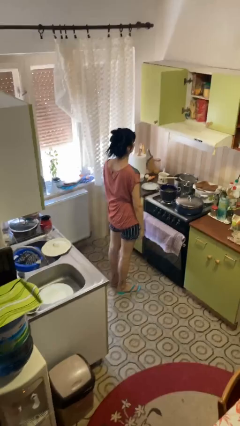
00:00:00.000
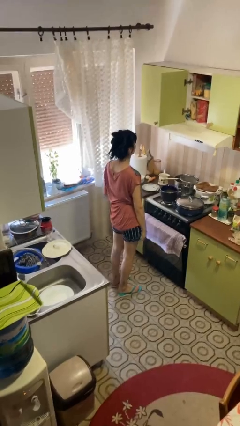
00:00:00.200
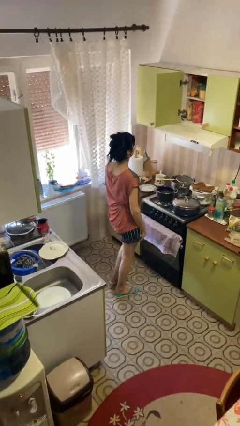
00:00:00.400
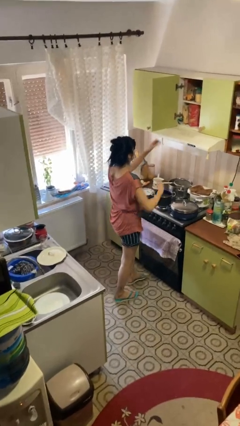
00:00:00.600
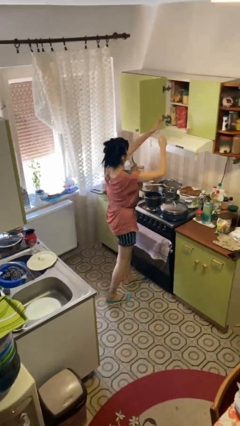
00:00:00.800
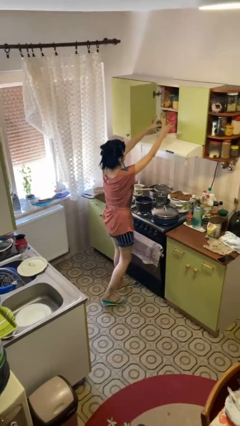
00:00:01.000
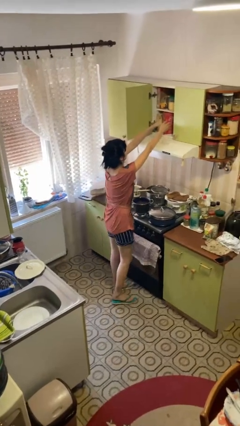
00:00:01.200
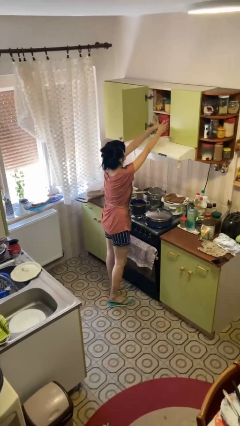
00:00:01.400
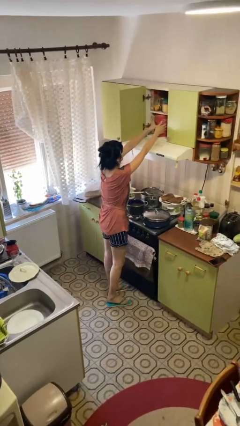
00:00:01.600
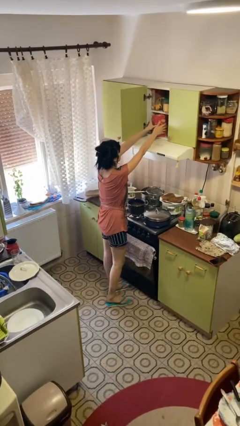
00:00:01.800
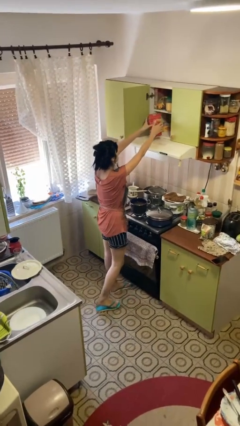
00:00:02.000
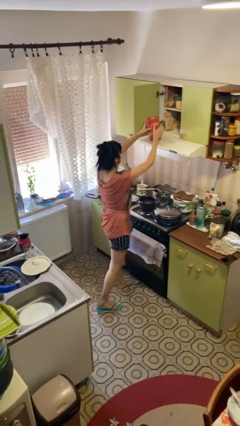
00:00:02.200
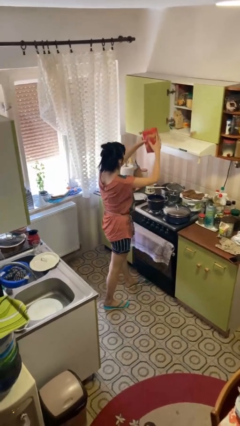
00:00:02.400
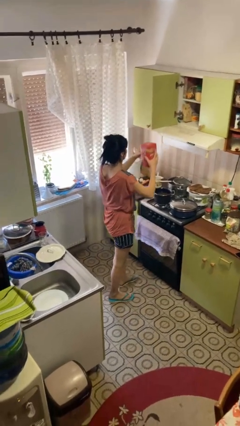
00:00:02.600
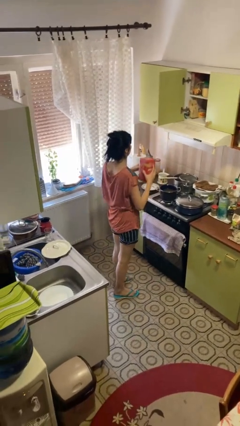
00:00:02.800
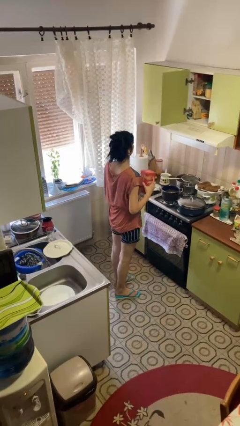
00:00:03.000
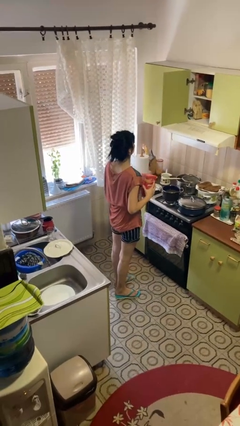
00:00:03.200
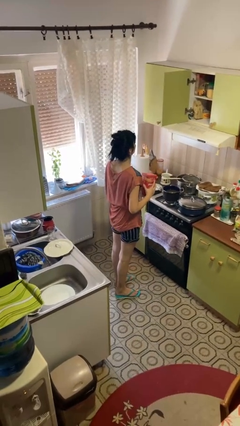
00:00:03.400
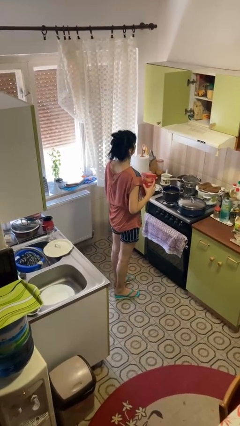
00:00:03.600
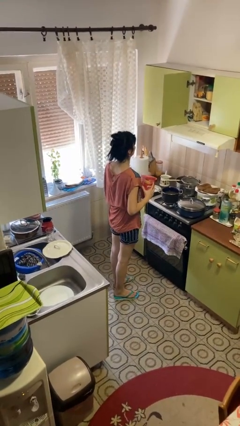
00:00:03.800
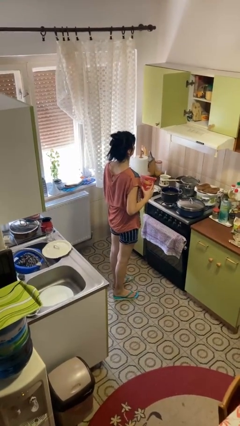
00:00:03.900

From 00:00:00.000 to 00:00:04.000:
person picks up object from cabinet

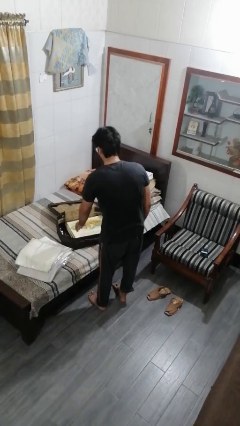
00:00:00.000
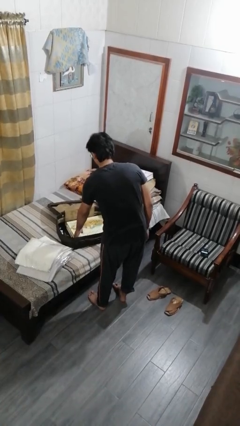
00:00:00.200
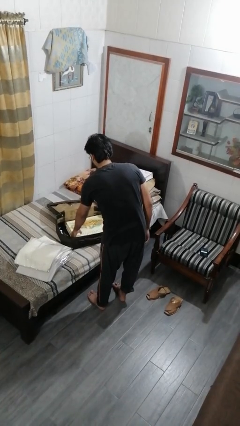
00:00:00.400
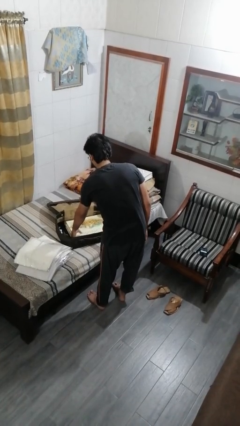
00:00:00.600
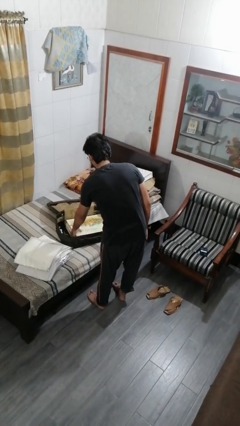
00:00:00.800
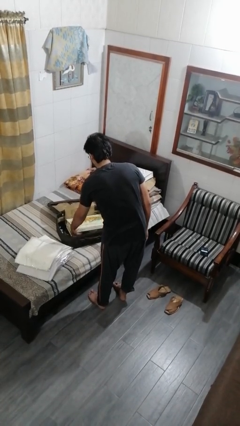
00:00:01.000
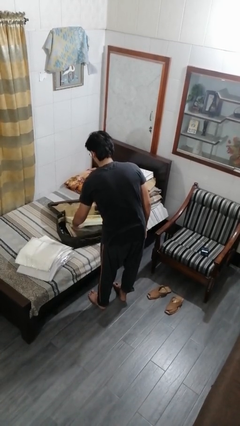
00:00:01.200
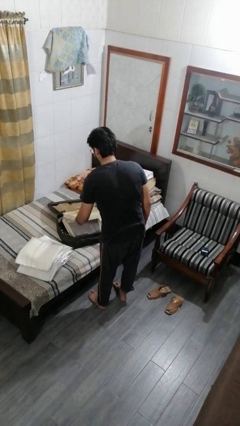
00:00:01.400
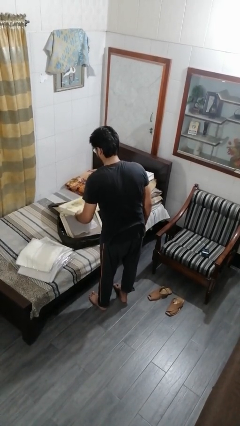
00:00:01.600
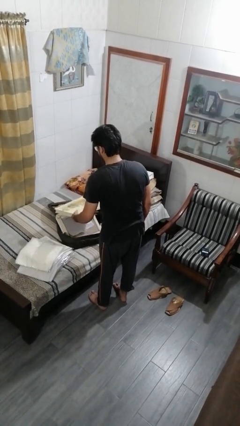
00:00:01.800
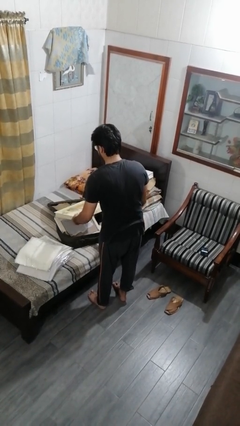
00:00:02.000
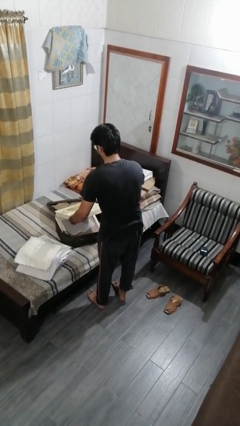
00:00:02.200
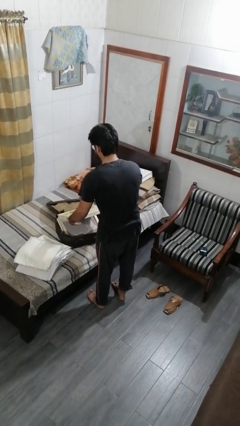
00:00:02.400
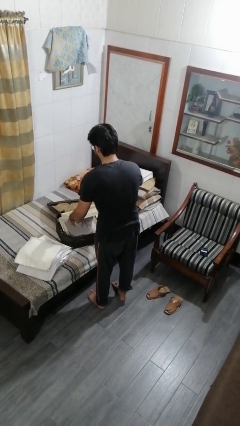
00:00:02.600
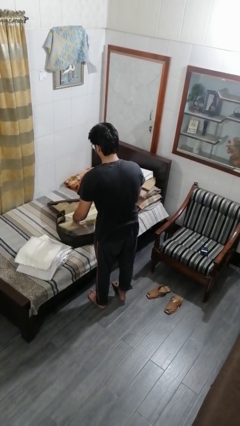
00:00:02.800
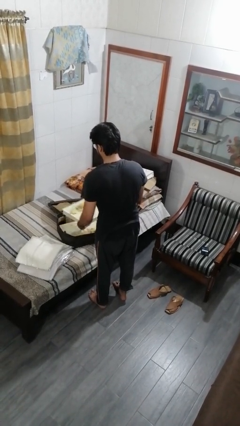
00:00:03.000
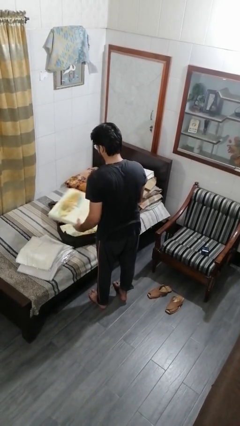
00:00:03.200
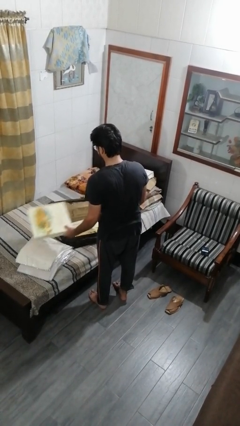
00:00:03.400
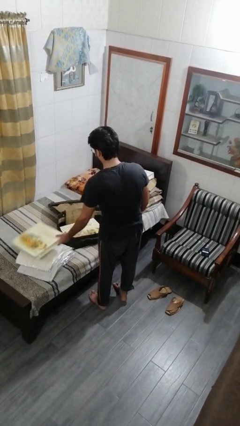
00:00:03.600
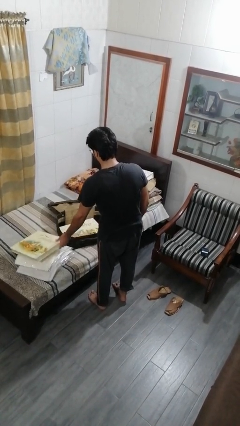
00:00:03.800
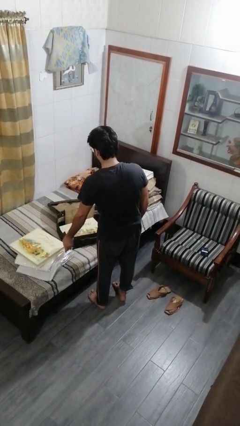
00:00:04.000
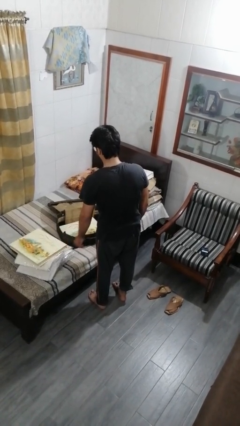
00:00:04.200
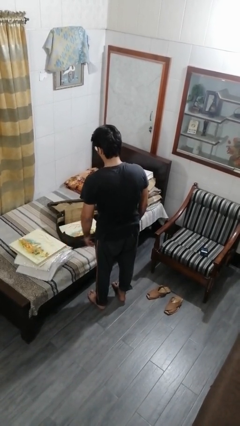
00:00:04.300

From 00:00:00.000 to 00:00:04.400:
person unloads clothes from suitcase

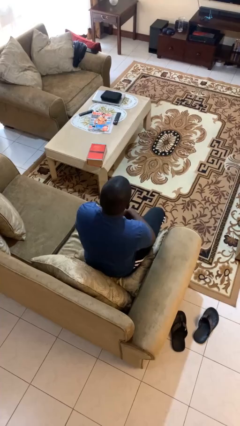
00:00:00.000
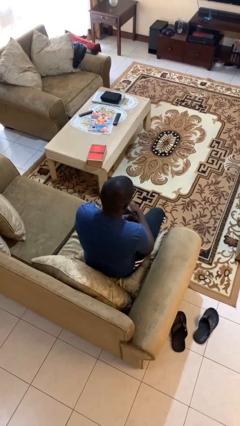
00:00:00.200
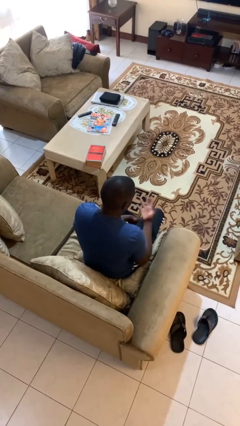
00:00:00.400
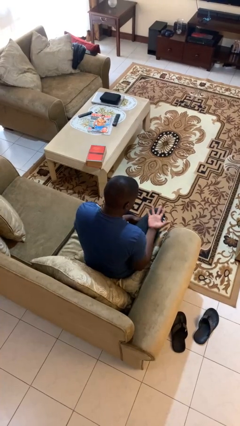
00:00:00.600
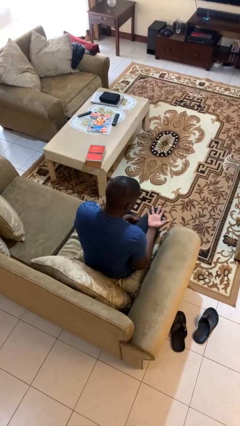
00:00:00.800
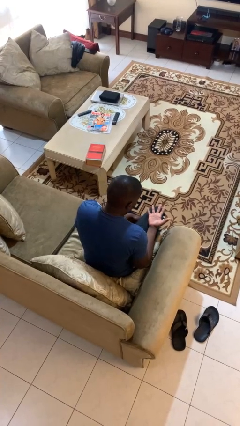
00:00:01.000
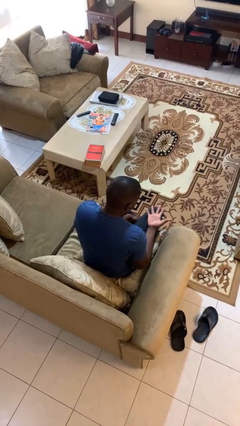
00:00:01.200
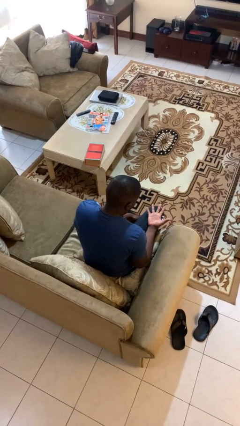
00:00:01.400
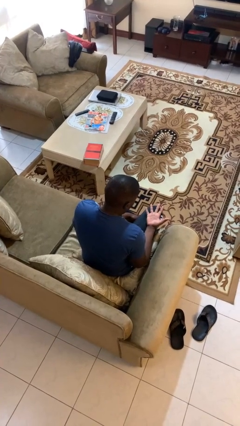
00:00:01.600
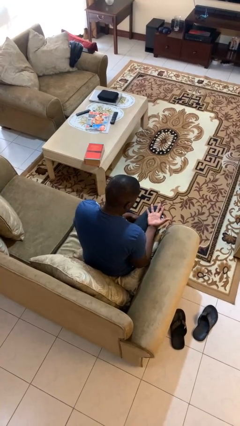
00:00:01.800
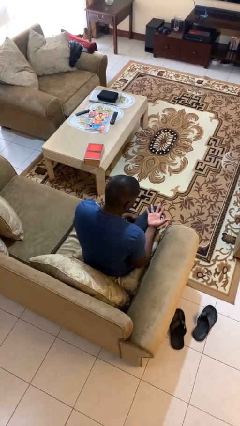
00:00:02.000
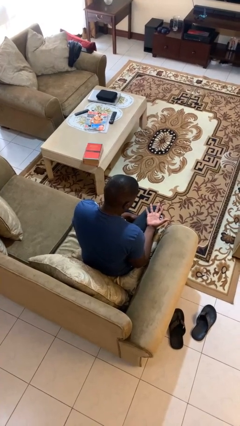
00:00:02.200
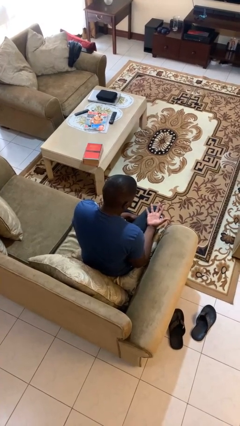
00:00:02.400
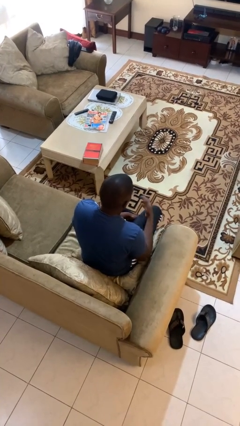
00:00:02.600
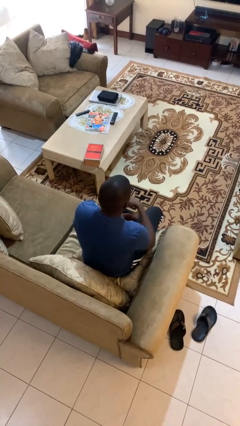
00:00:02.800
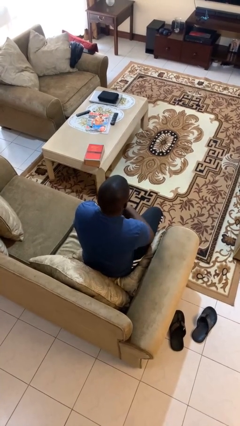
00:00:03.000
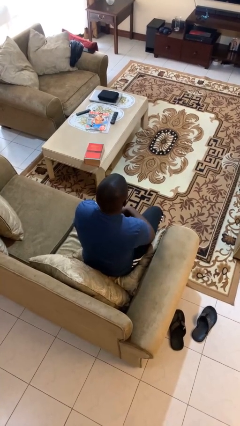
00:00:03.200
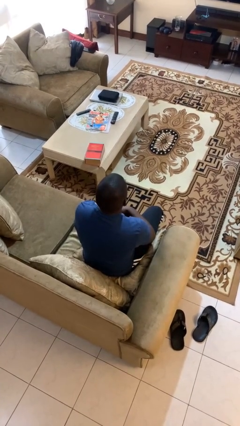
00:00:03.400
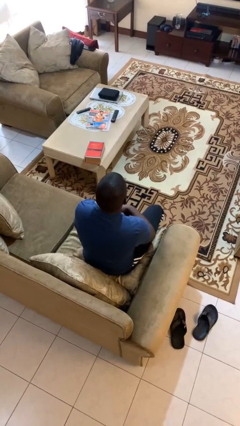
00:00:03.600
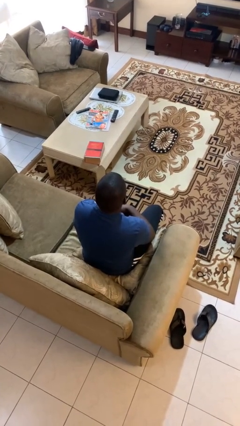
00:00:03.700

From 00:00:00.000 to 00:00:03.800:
person looks at hands in lap

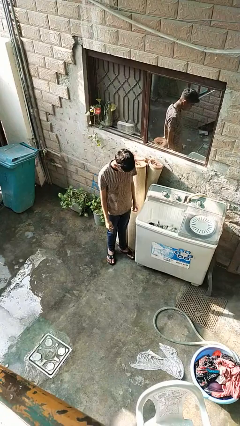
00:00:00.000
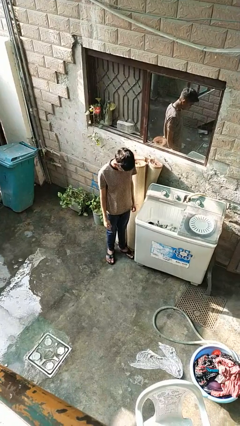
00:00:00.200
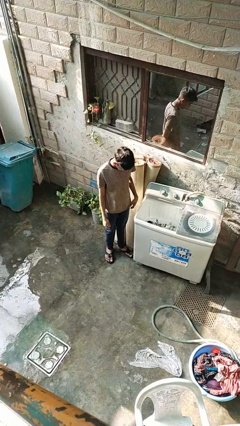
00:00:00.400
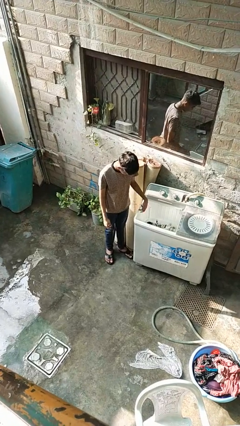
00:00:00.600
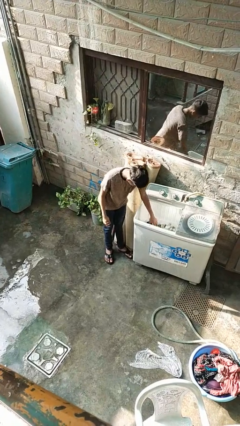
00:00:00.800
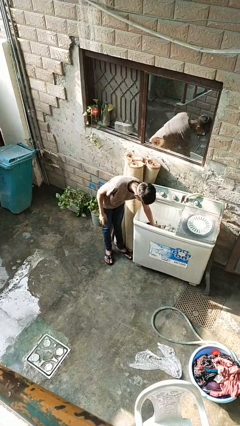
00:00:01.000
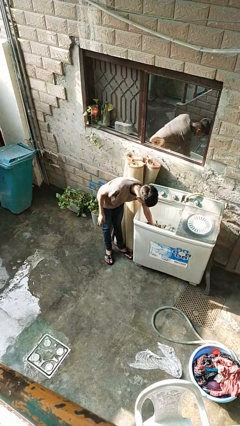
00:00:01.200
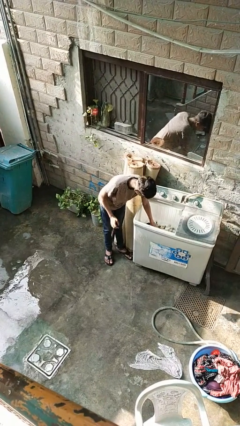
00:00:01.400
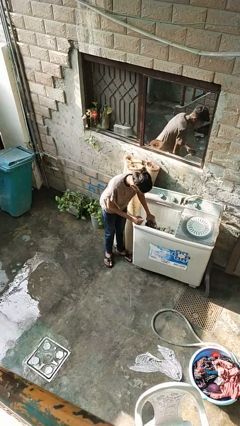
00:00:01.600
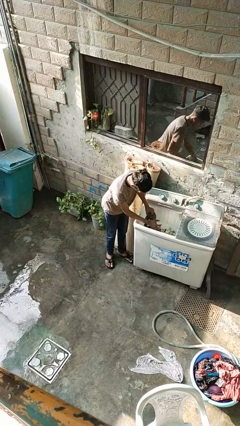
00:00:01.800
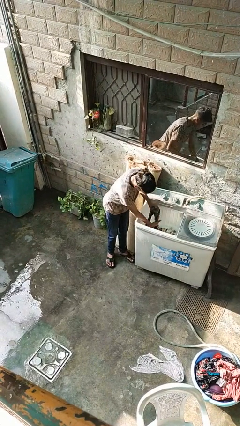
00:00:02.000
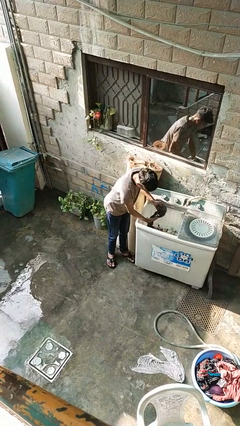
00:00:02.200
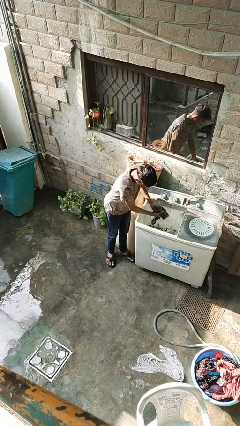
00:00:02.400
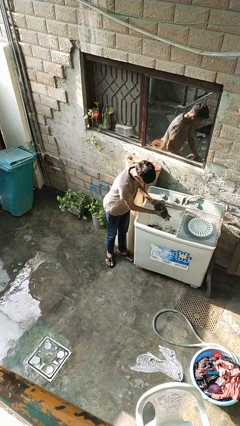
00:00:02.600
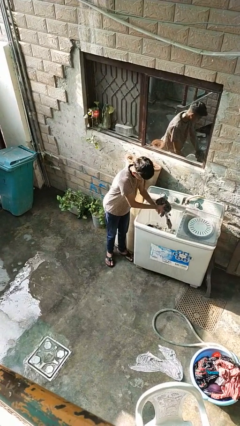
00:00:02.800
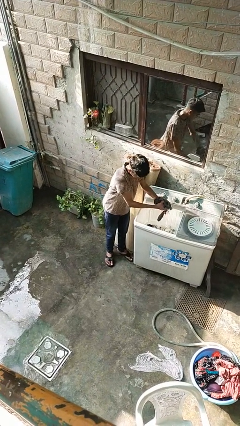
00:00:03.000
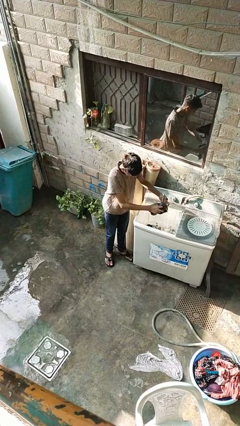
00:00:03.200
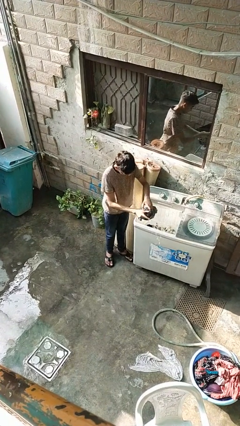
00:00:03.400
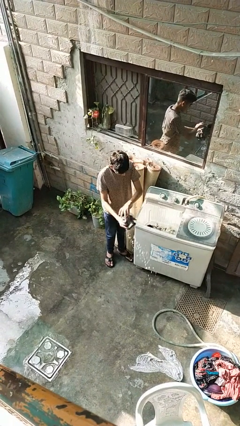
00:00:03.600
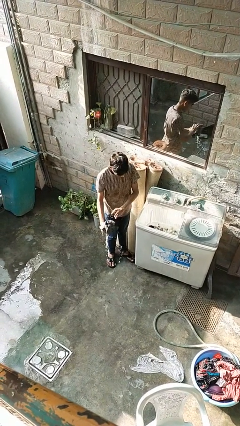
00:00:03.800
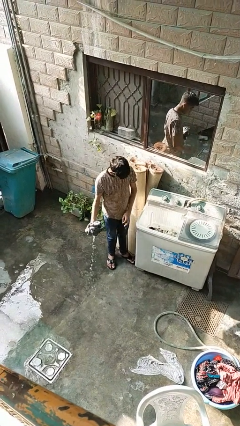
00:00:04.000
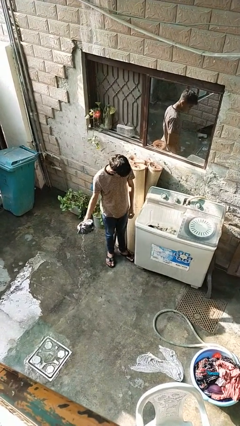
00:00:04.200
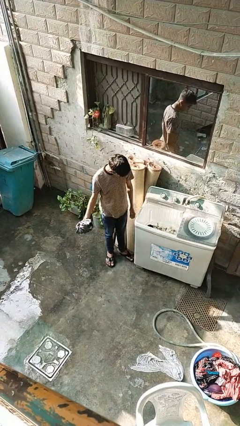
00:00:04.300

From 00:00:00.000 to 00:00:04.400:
person unloads clotheswasher

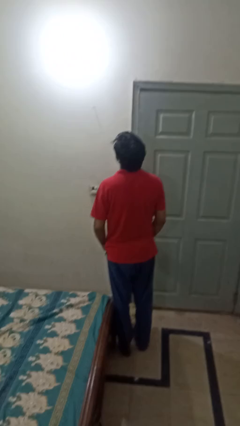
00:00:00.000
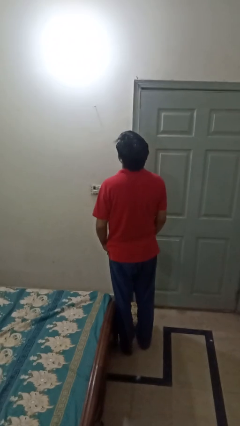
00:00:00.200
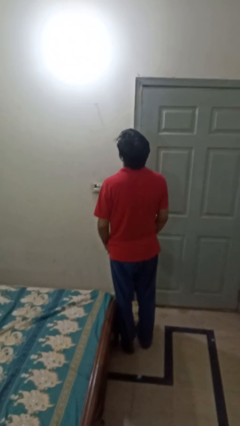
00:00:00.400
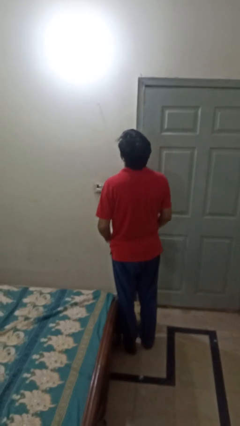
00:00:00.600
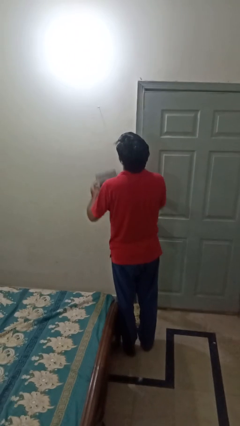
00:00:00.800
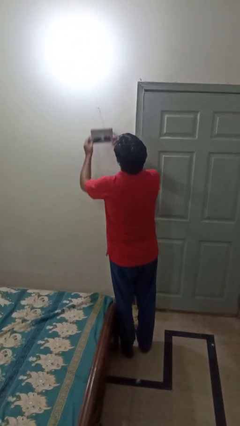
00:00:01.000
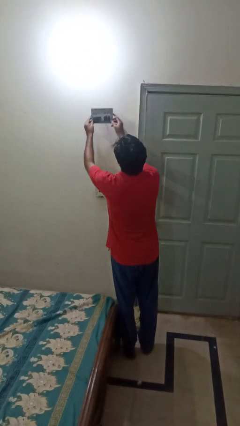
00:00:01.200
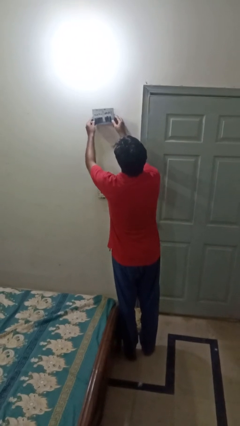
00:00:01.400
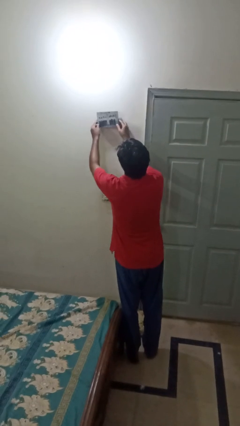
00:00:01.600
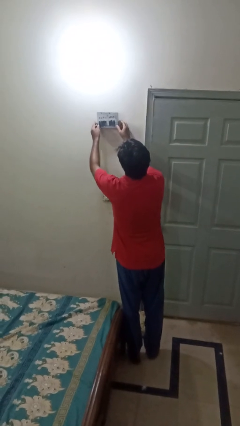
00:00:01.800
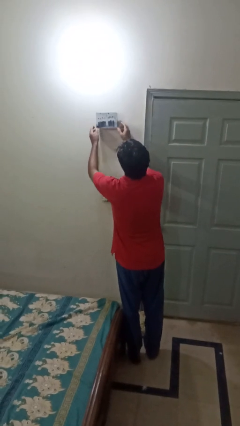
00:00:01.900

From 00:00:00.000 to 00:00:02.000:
person puts up picture frame
